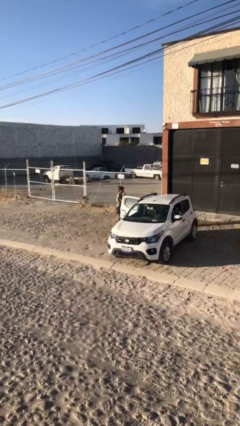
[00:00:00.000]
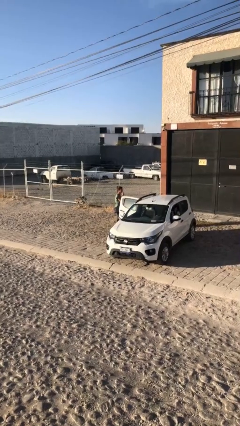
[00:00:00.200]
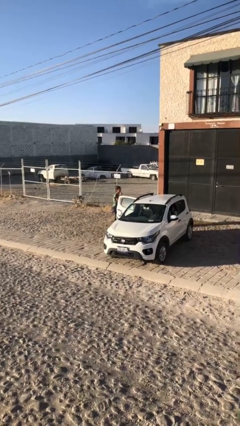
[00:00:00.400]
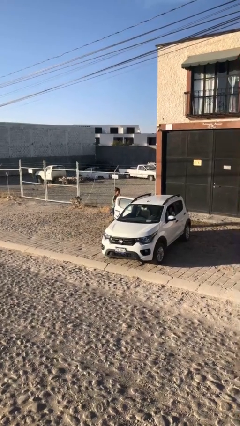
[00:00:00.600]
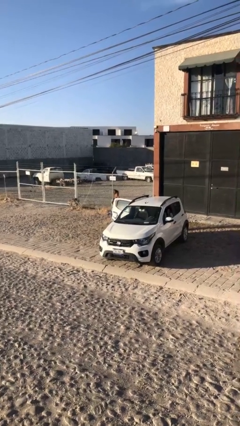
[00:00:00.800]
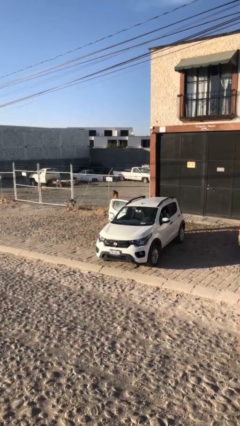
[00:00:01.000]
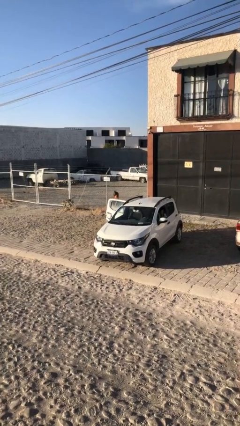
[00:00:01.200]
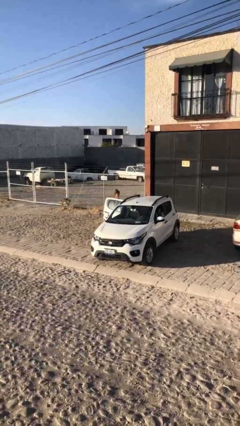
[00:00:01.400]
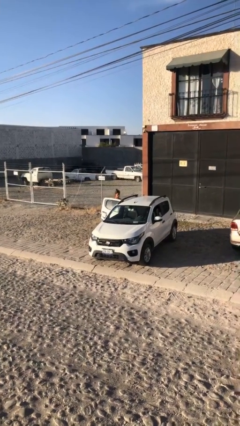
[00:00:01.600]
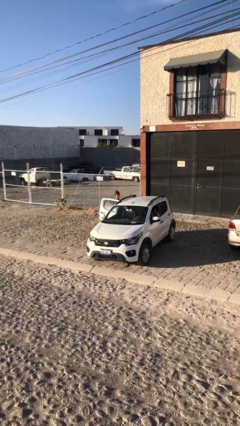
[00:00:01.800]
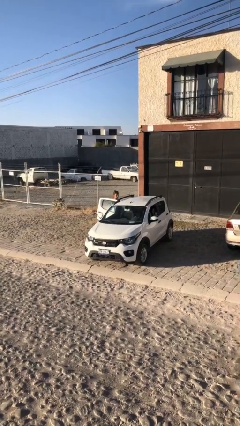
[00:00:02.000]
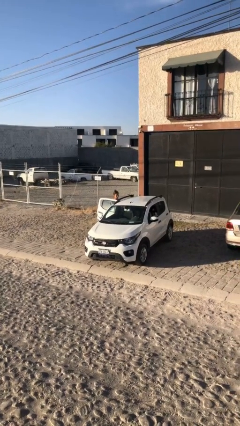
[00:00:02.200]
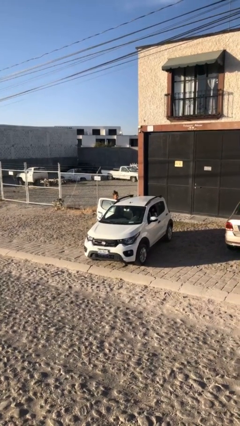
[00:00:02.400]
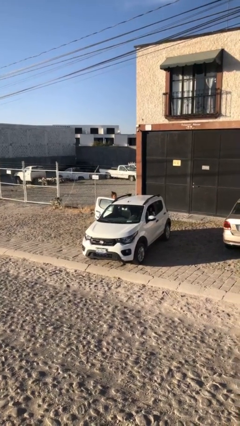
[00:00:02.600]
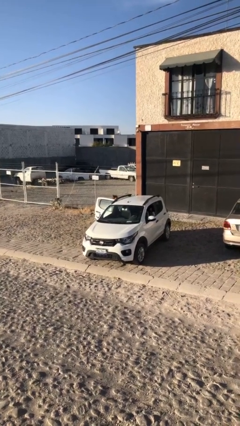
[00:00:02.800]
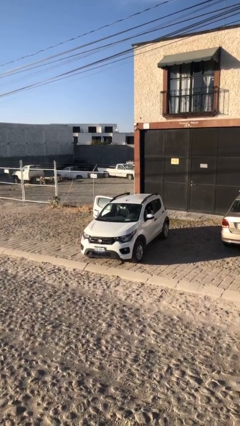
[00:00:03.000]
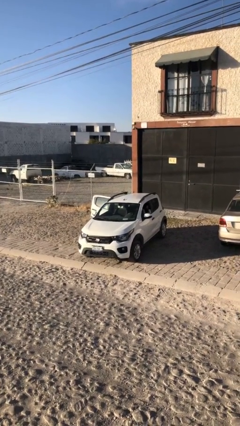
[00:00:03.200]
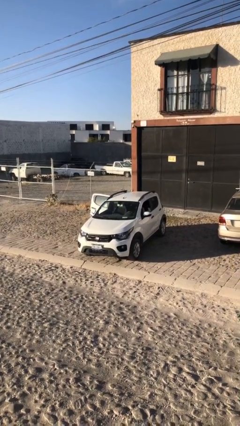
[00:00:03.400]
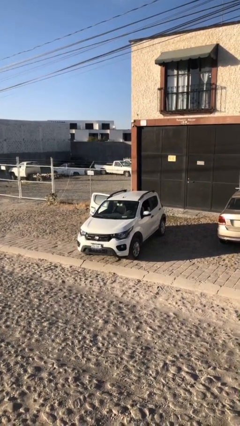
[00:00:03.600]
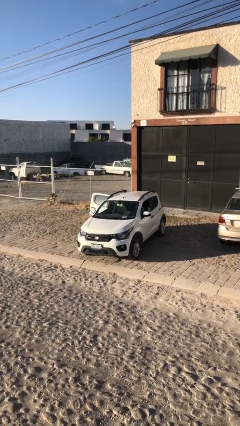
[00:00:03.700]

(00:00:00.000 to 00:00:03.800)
person enters car

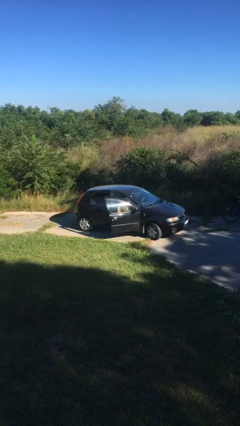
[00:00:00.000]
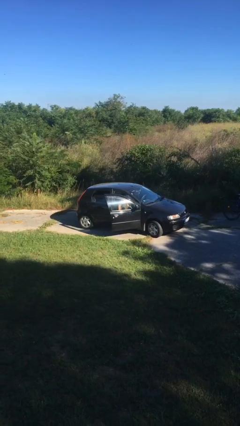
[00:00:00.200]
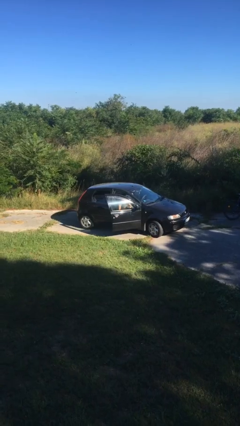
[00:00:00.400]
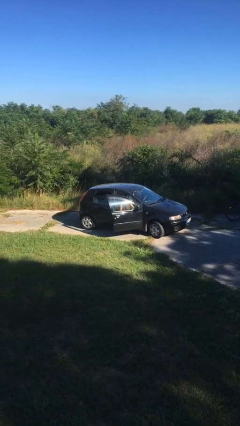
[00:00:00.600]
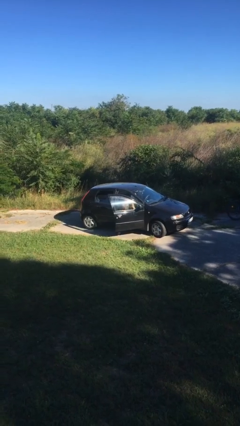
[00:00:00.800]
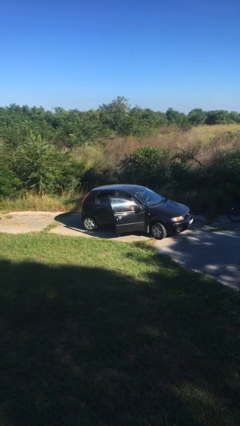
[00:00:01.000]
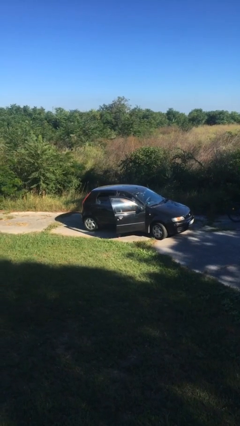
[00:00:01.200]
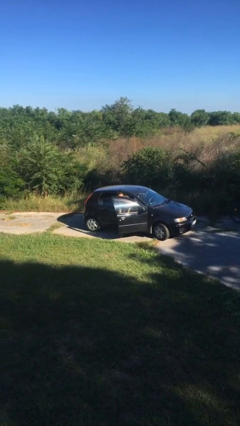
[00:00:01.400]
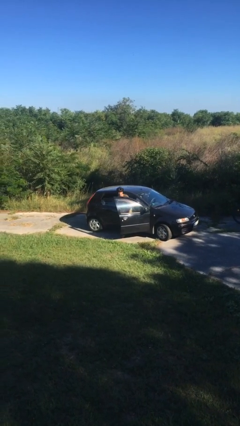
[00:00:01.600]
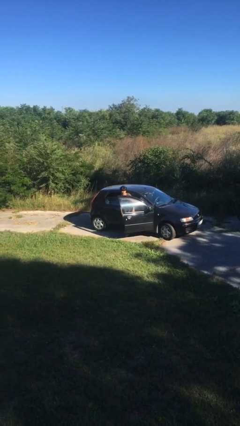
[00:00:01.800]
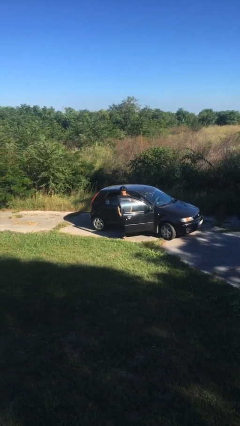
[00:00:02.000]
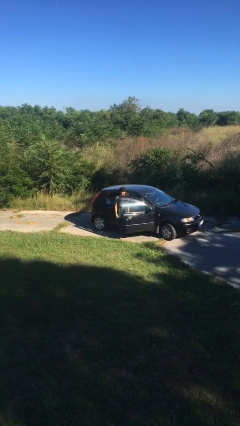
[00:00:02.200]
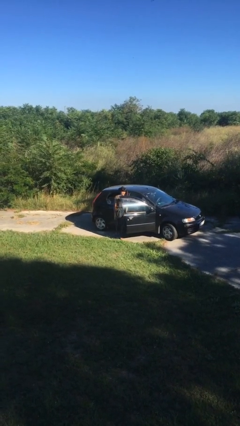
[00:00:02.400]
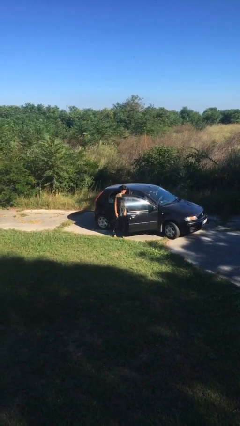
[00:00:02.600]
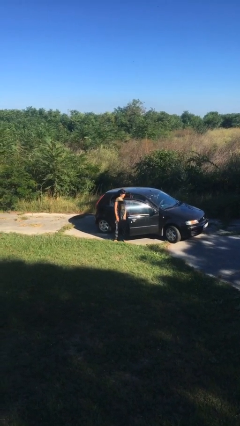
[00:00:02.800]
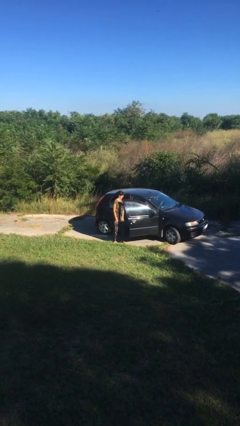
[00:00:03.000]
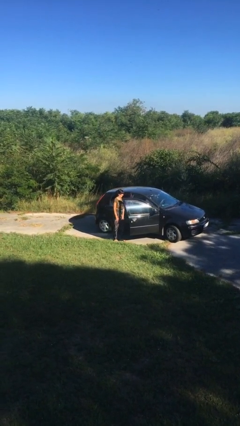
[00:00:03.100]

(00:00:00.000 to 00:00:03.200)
person exits car

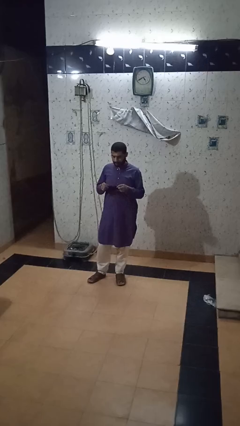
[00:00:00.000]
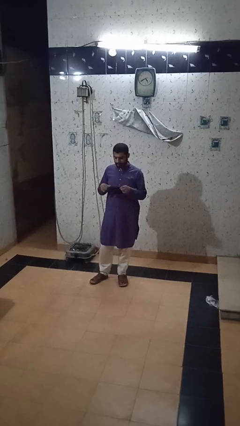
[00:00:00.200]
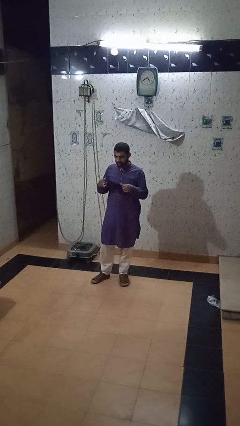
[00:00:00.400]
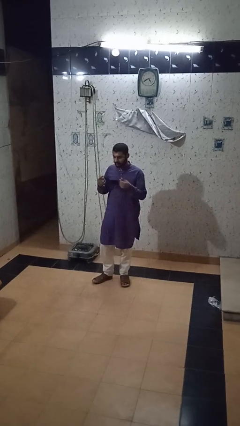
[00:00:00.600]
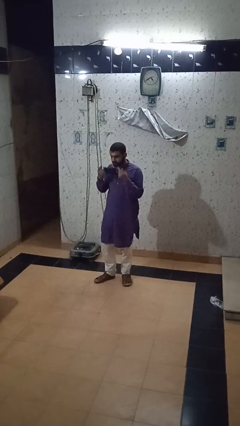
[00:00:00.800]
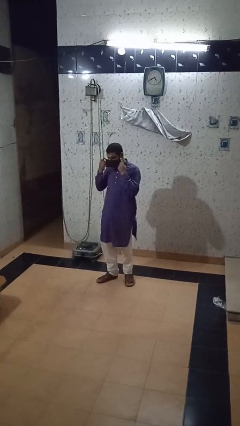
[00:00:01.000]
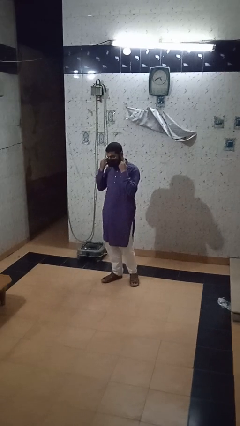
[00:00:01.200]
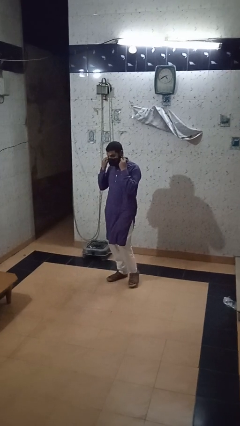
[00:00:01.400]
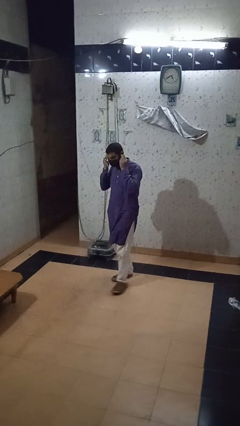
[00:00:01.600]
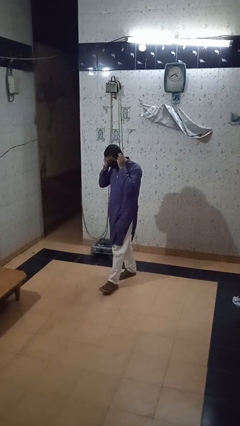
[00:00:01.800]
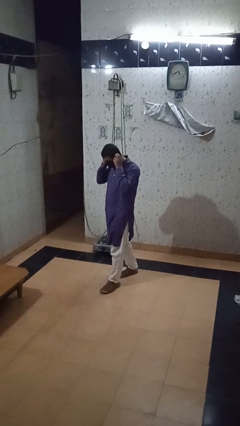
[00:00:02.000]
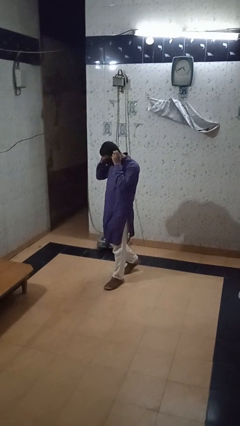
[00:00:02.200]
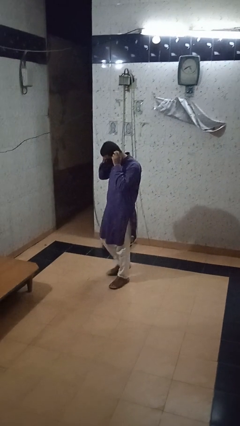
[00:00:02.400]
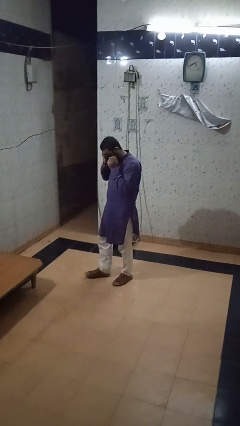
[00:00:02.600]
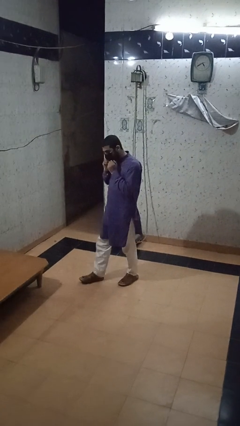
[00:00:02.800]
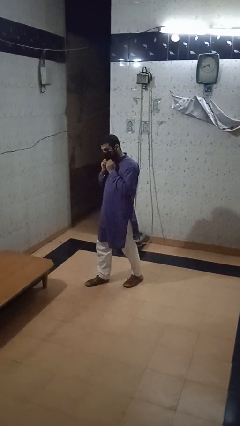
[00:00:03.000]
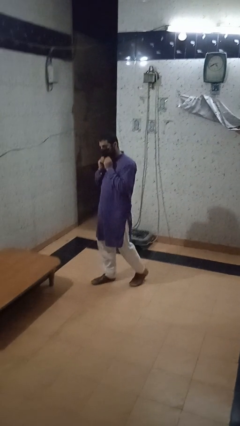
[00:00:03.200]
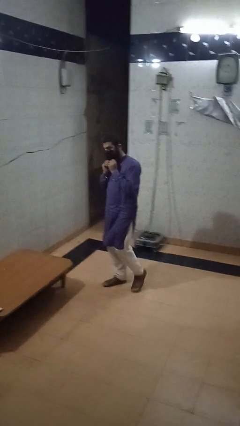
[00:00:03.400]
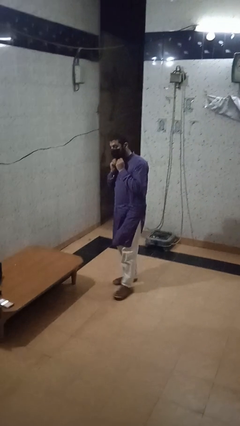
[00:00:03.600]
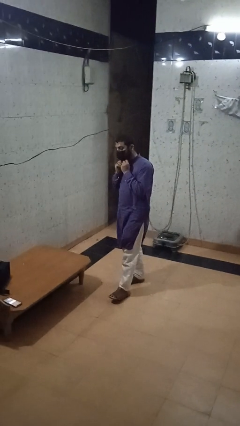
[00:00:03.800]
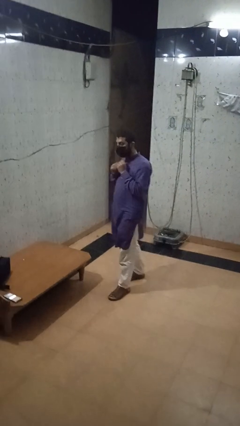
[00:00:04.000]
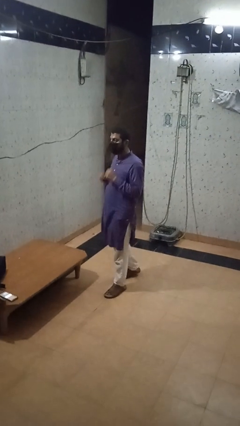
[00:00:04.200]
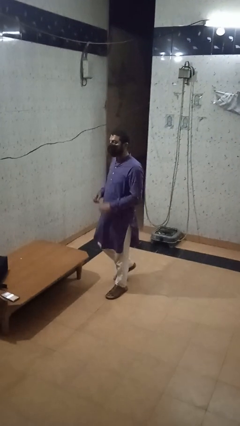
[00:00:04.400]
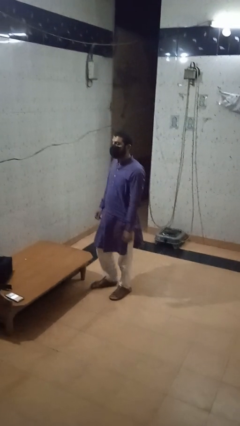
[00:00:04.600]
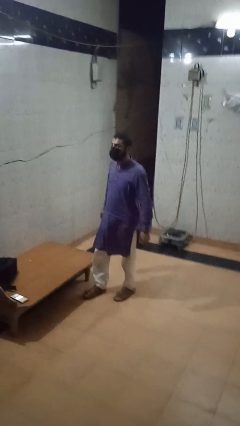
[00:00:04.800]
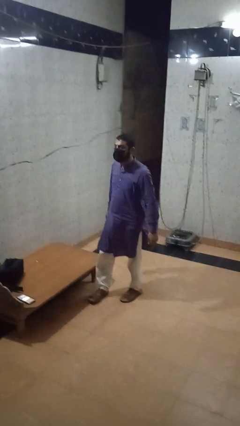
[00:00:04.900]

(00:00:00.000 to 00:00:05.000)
person puts on facemask

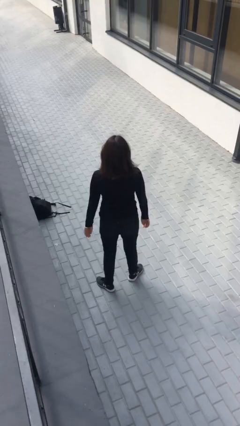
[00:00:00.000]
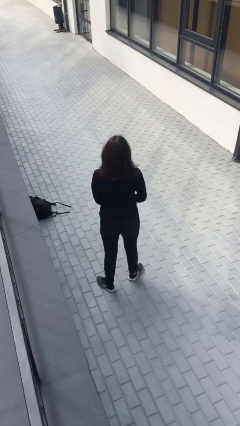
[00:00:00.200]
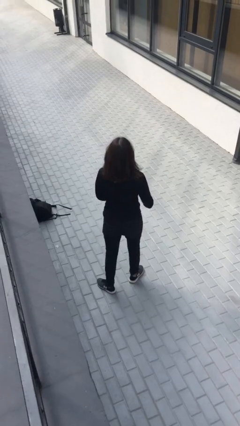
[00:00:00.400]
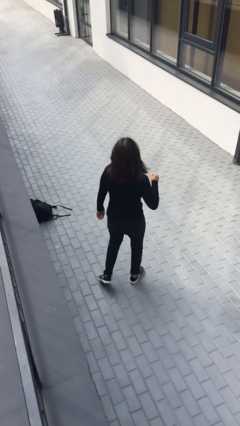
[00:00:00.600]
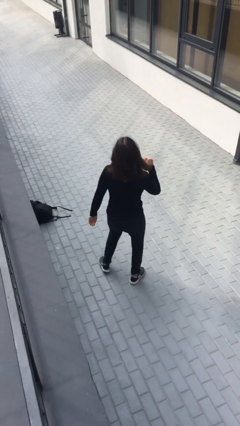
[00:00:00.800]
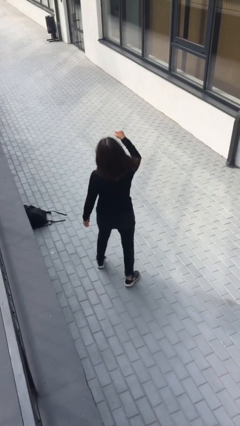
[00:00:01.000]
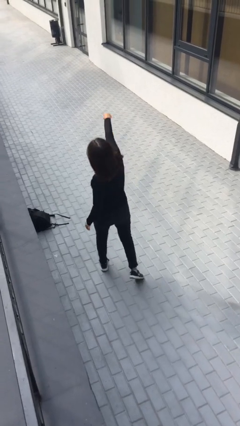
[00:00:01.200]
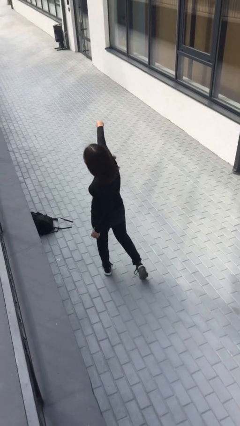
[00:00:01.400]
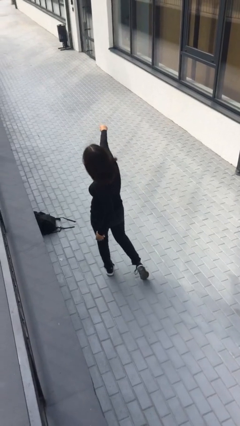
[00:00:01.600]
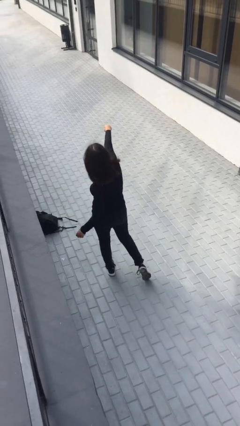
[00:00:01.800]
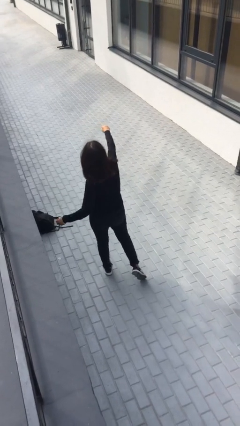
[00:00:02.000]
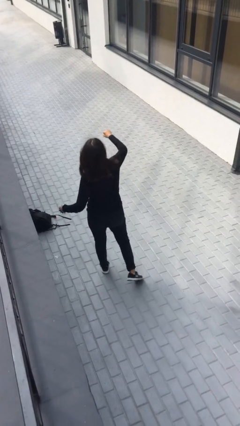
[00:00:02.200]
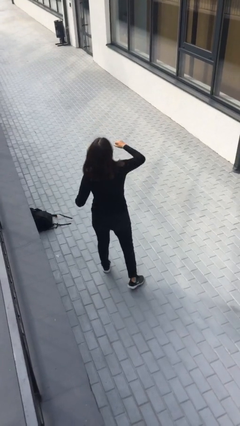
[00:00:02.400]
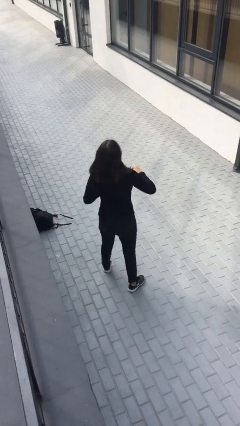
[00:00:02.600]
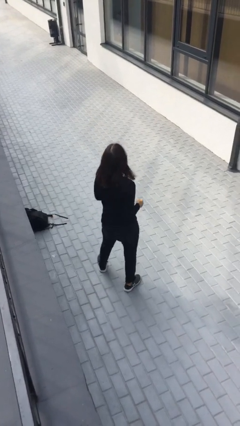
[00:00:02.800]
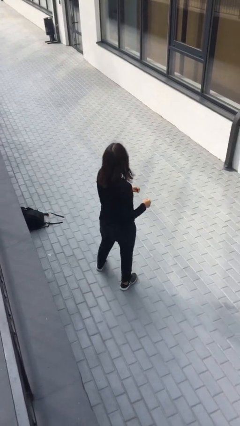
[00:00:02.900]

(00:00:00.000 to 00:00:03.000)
person punches

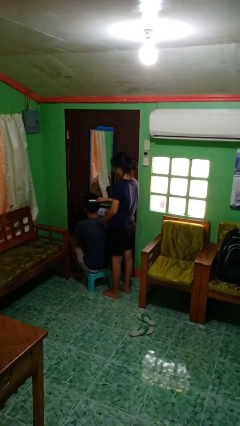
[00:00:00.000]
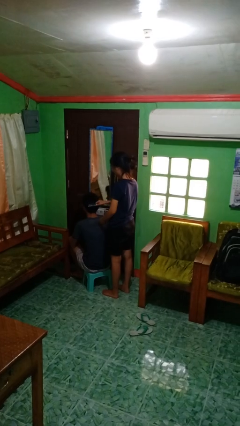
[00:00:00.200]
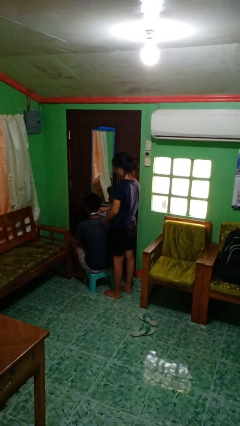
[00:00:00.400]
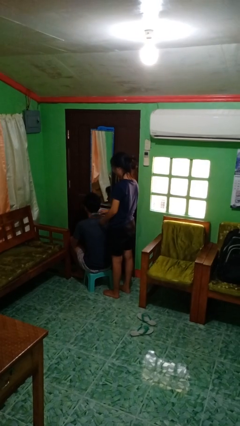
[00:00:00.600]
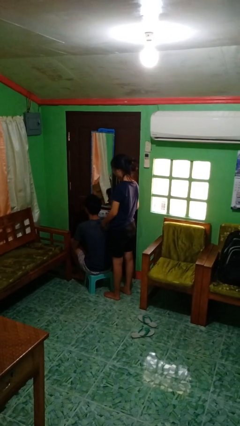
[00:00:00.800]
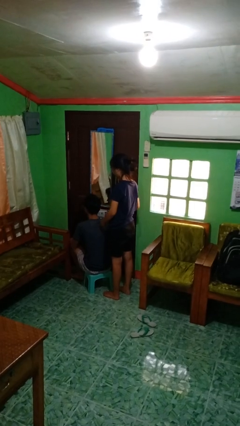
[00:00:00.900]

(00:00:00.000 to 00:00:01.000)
person brushes hair of person

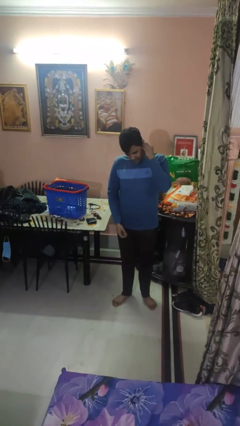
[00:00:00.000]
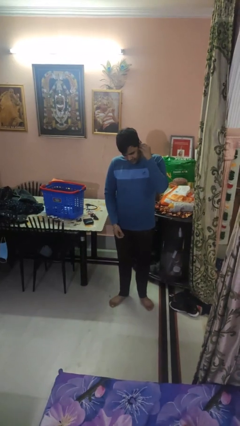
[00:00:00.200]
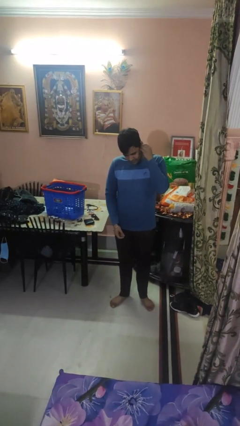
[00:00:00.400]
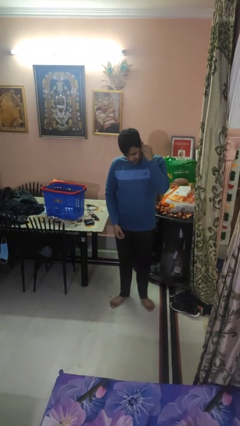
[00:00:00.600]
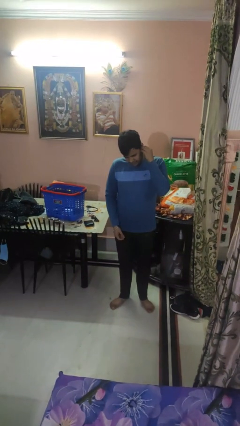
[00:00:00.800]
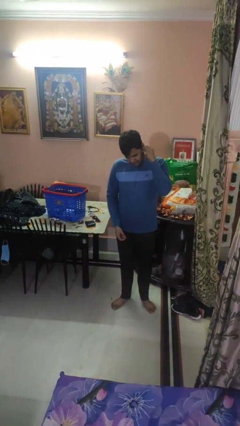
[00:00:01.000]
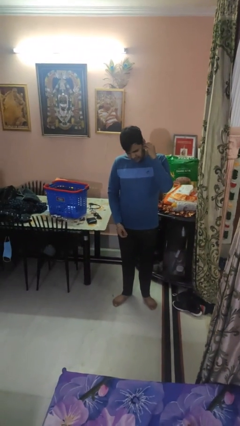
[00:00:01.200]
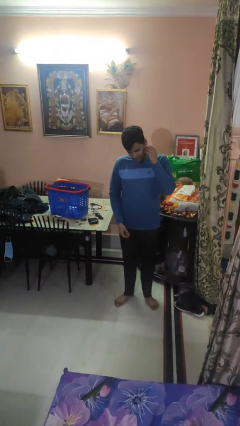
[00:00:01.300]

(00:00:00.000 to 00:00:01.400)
person puts on earrings
